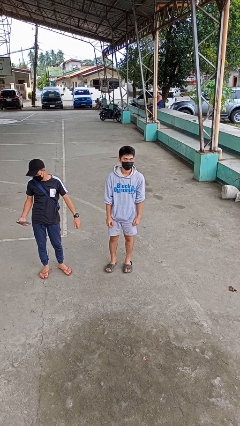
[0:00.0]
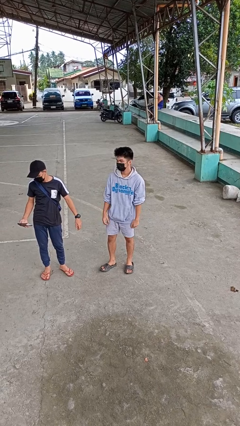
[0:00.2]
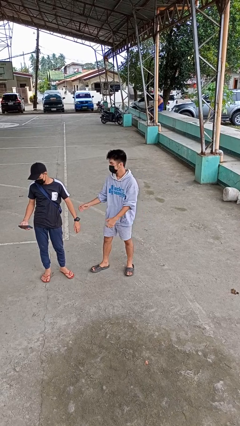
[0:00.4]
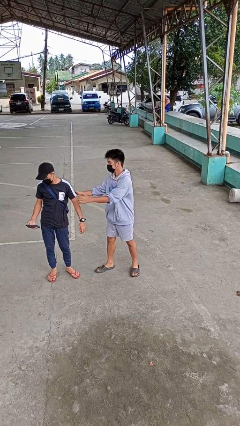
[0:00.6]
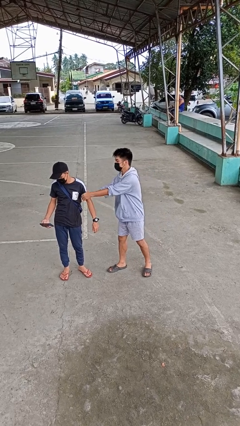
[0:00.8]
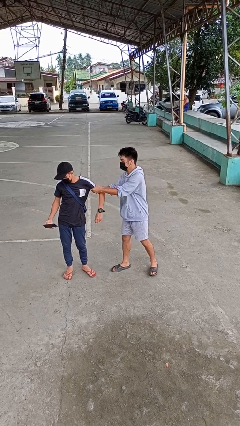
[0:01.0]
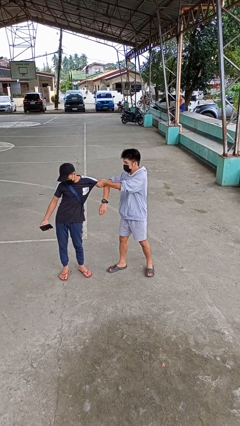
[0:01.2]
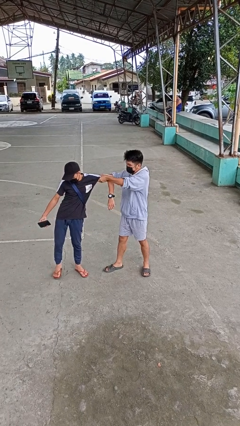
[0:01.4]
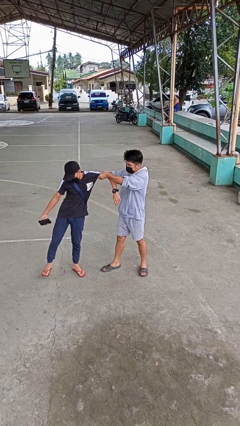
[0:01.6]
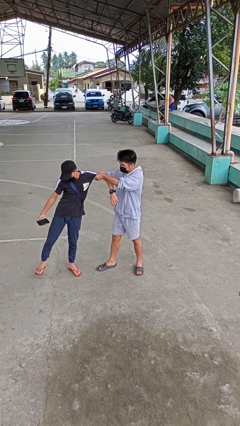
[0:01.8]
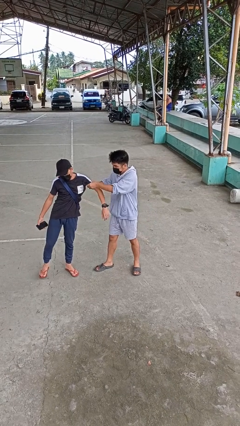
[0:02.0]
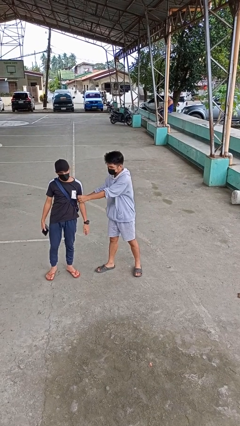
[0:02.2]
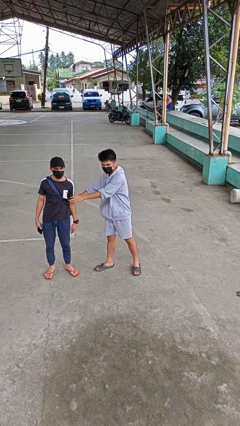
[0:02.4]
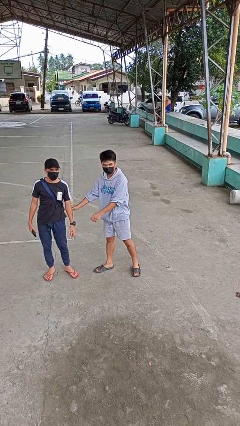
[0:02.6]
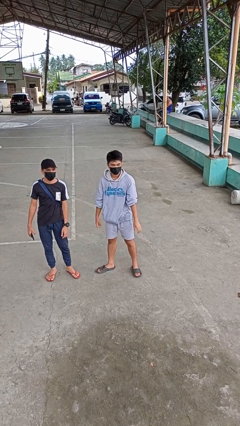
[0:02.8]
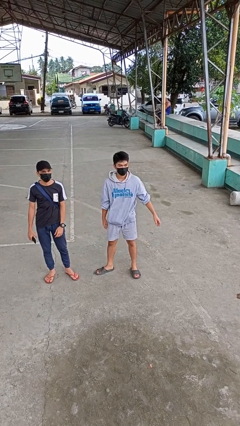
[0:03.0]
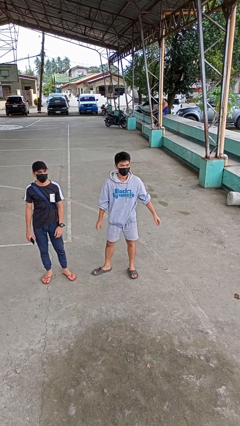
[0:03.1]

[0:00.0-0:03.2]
person grabs person by bicep

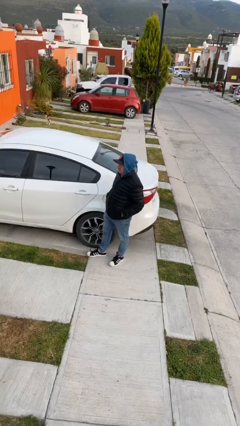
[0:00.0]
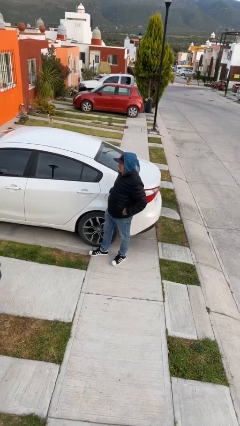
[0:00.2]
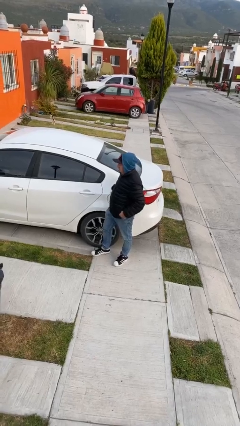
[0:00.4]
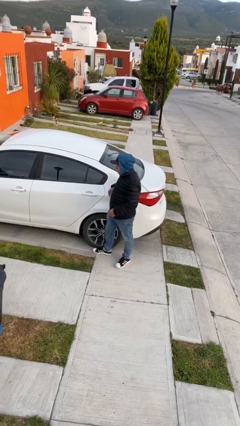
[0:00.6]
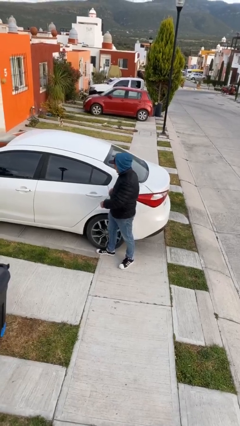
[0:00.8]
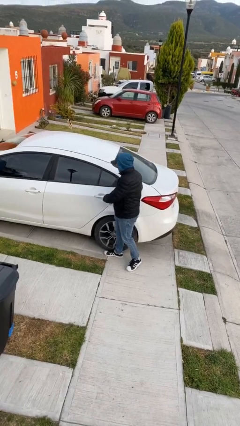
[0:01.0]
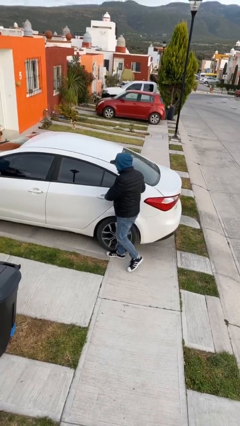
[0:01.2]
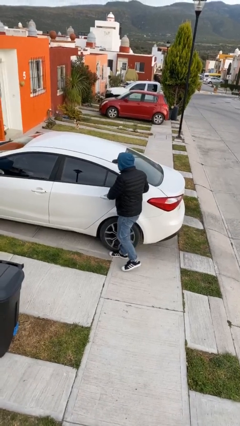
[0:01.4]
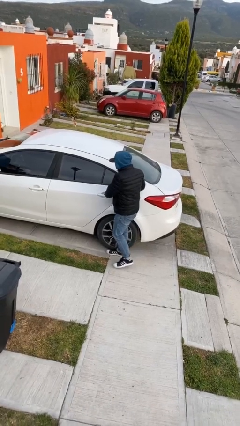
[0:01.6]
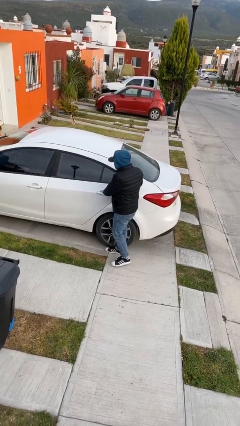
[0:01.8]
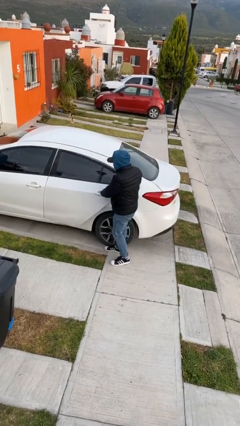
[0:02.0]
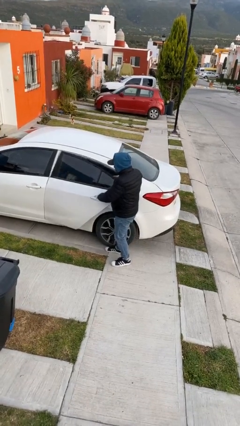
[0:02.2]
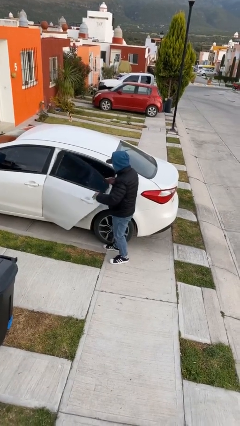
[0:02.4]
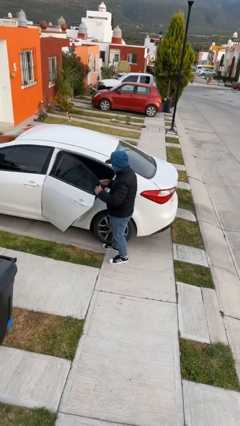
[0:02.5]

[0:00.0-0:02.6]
person opens car door

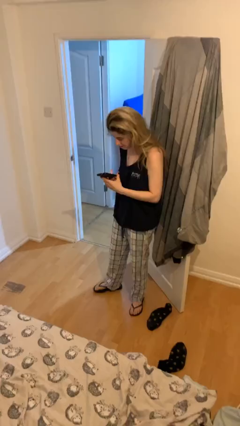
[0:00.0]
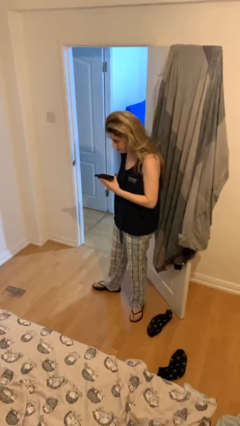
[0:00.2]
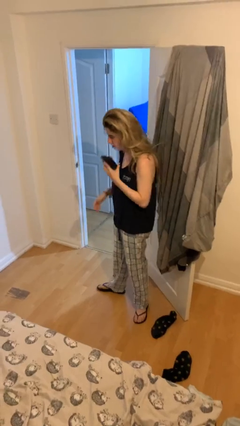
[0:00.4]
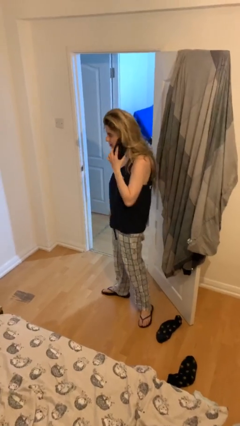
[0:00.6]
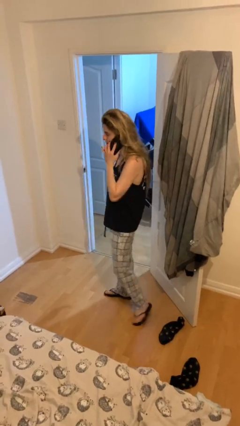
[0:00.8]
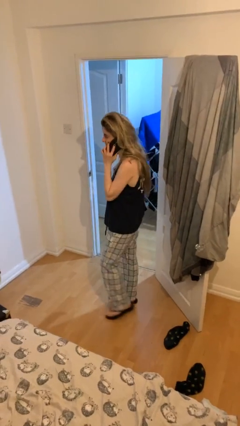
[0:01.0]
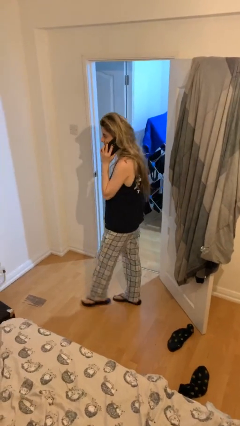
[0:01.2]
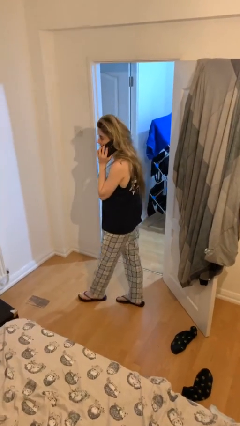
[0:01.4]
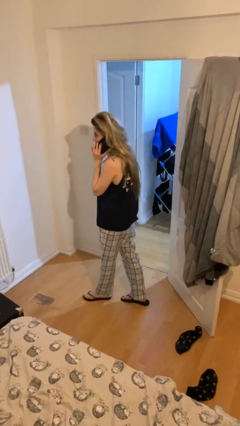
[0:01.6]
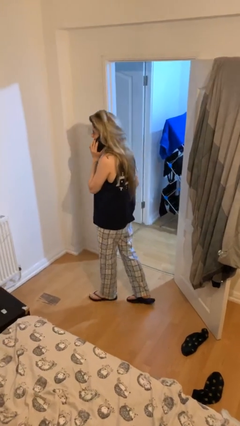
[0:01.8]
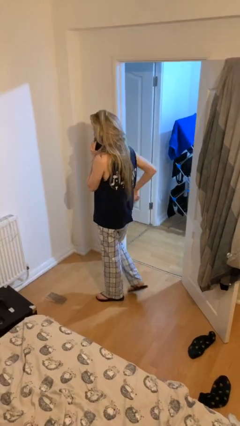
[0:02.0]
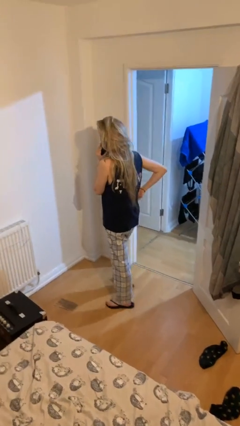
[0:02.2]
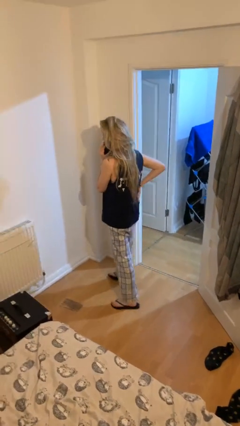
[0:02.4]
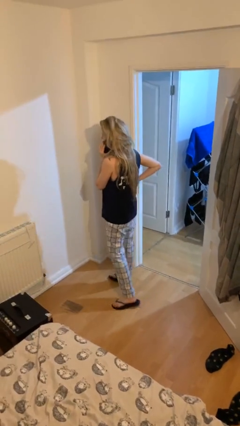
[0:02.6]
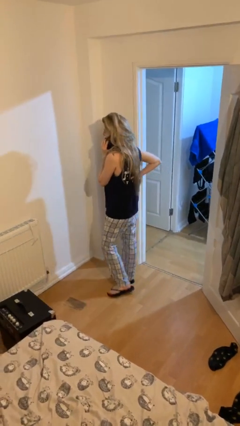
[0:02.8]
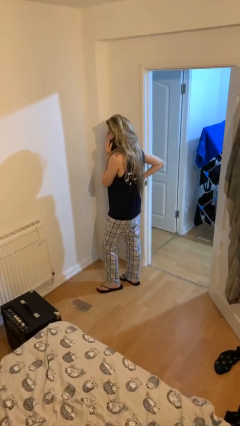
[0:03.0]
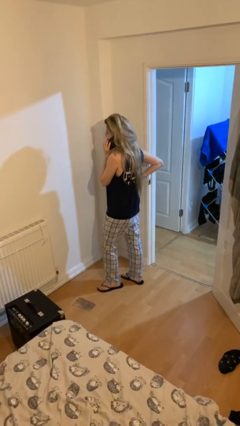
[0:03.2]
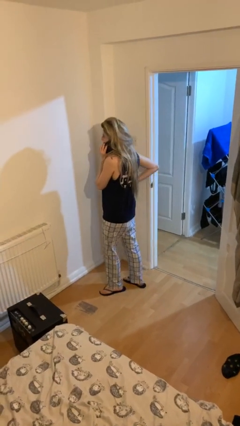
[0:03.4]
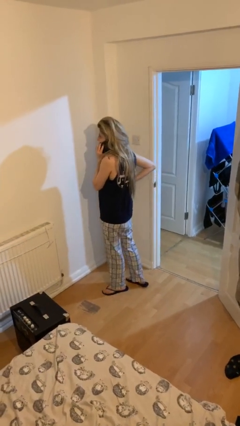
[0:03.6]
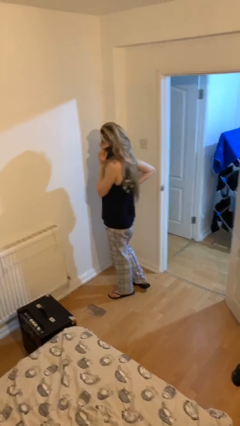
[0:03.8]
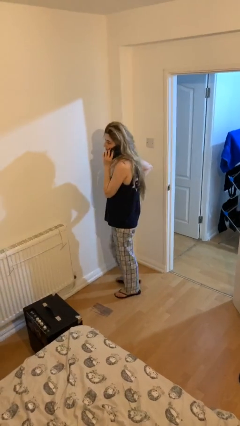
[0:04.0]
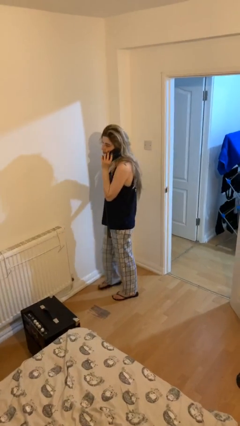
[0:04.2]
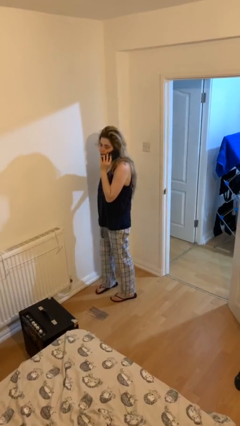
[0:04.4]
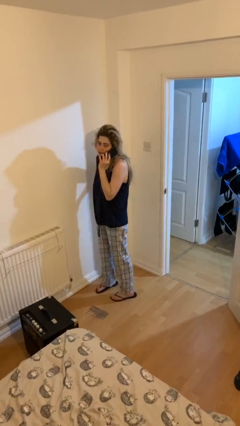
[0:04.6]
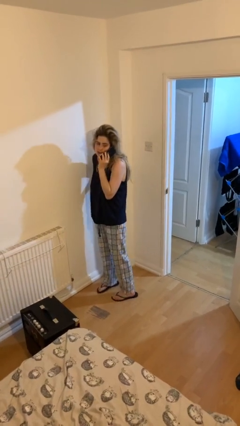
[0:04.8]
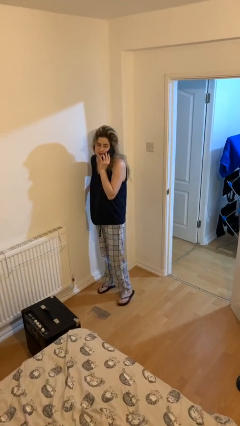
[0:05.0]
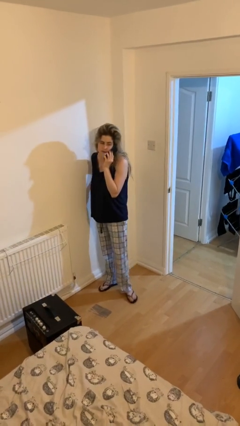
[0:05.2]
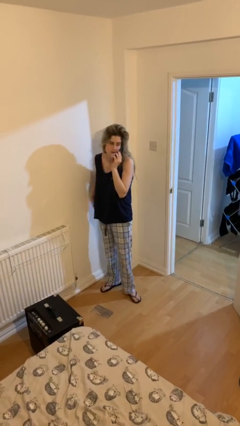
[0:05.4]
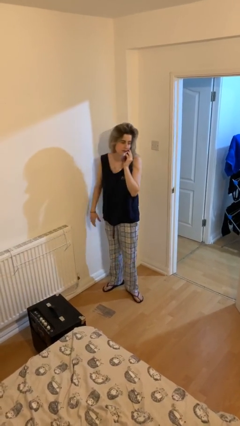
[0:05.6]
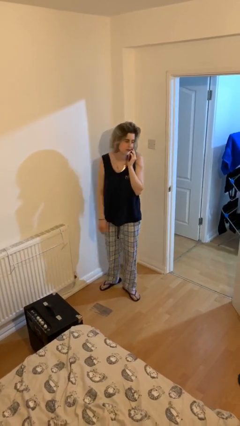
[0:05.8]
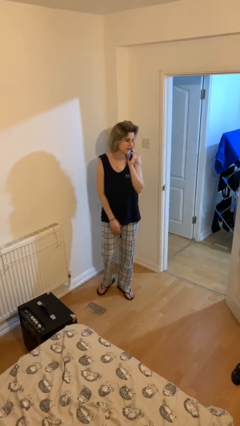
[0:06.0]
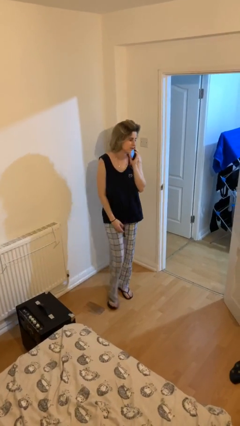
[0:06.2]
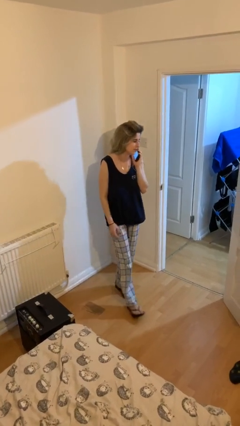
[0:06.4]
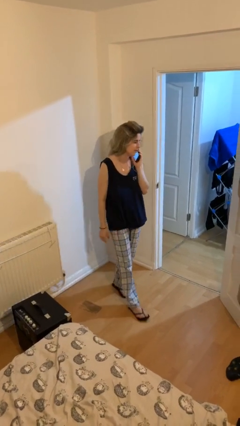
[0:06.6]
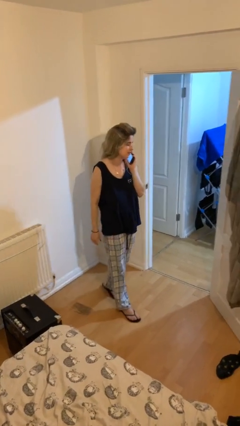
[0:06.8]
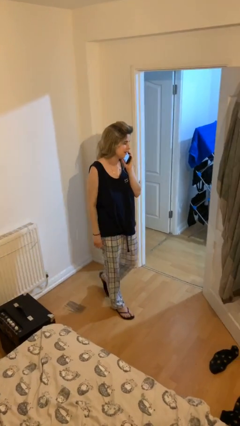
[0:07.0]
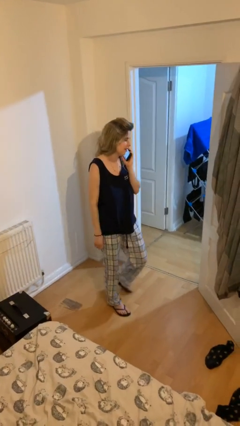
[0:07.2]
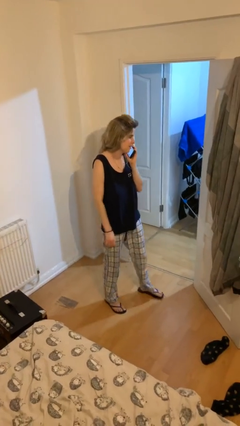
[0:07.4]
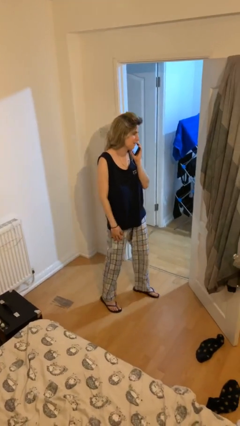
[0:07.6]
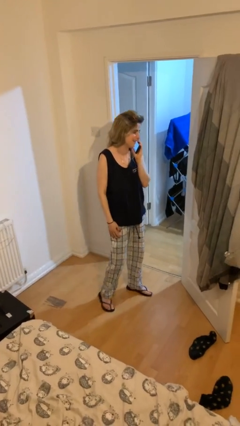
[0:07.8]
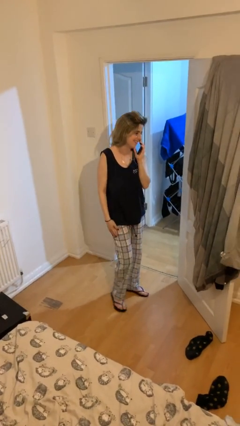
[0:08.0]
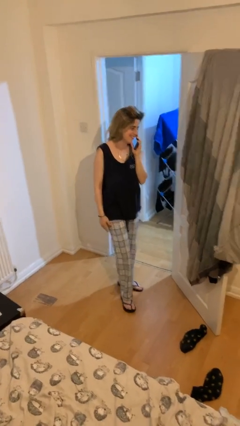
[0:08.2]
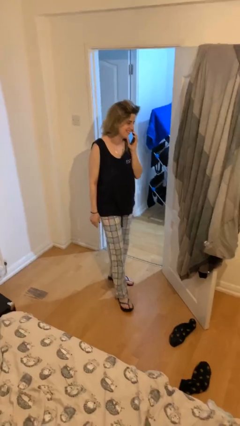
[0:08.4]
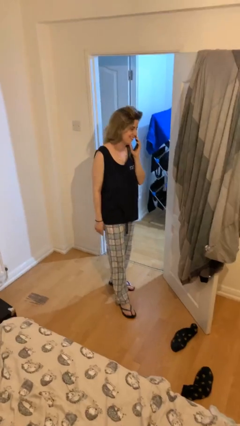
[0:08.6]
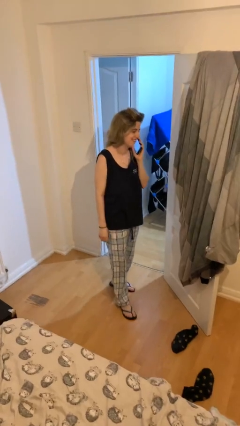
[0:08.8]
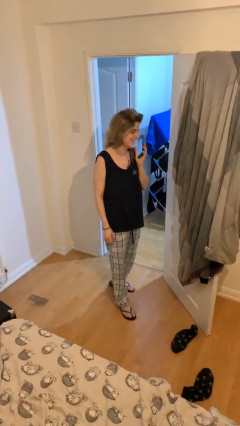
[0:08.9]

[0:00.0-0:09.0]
person talks on phone

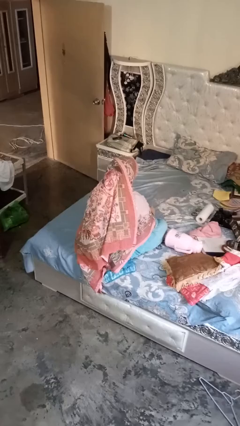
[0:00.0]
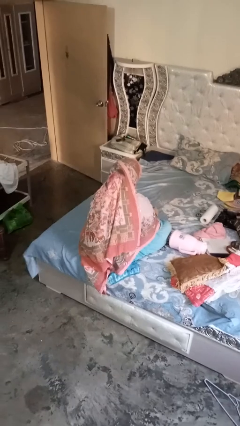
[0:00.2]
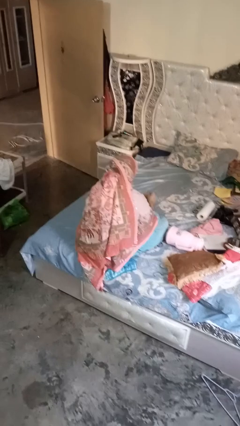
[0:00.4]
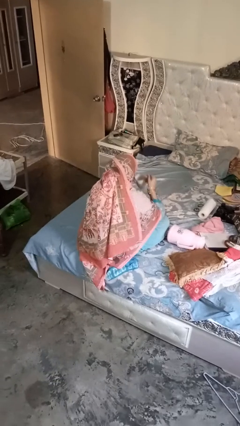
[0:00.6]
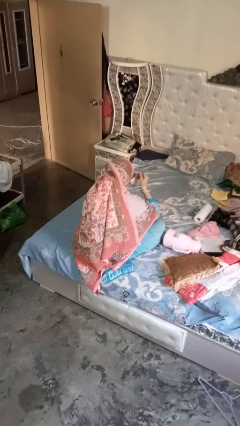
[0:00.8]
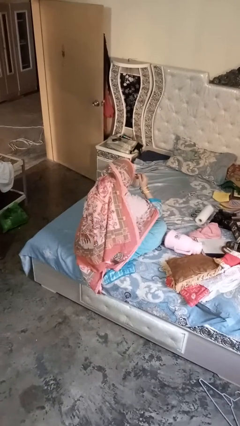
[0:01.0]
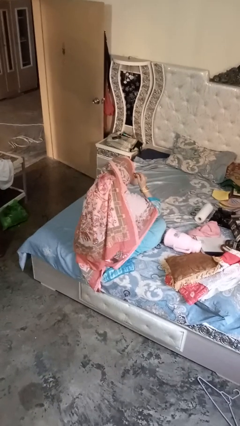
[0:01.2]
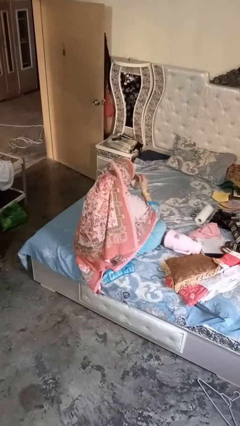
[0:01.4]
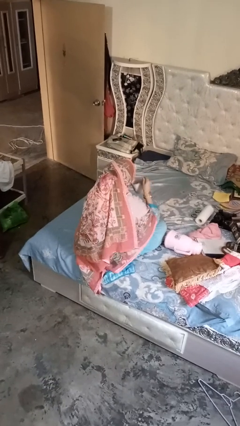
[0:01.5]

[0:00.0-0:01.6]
person drinks from mug

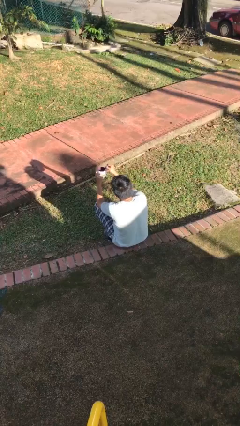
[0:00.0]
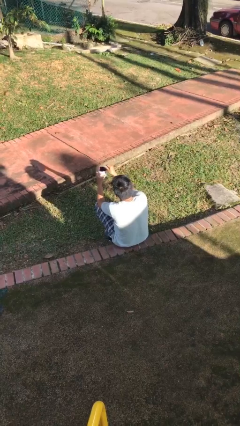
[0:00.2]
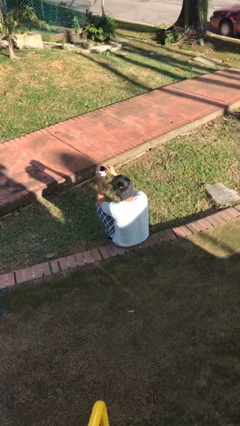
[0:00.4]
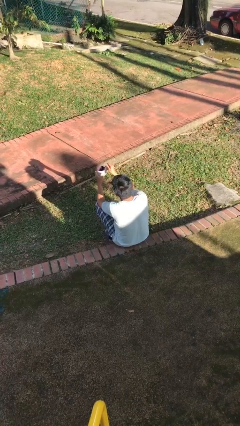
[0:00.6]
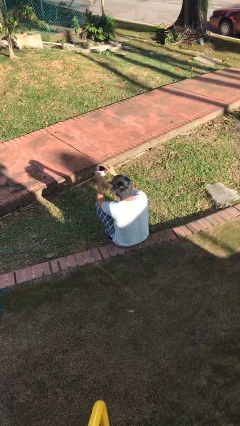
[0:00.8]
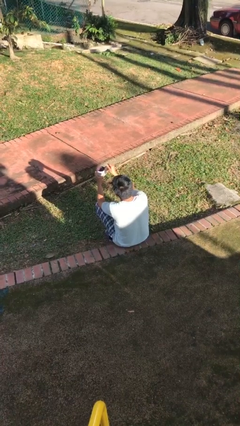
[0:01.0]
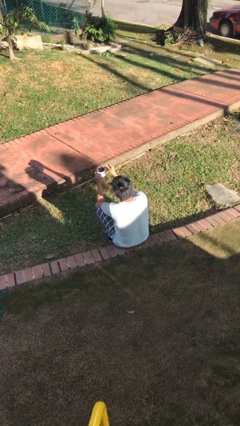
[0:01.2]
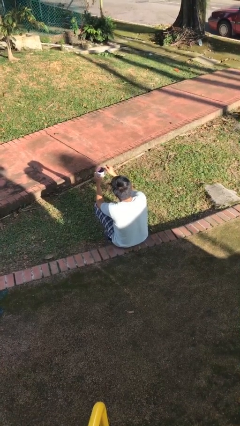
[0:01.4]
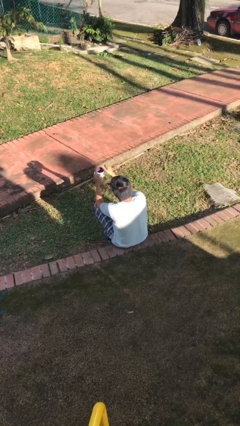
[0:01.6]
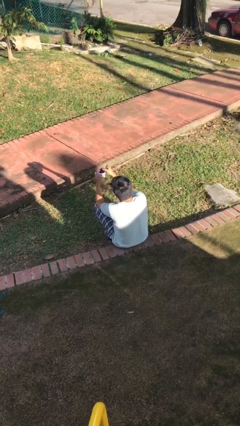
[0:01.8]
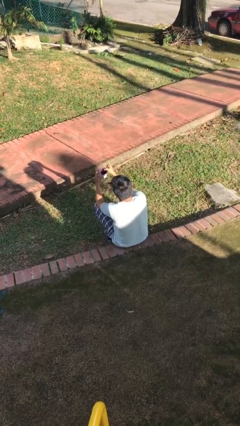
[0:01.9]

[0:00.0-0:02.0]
person stirs mug
